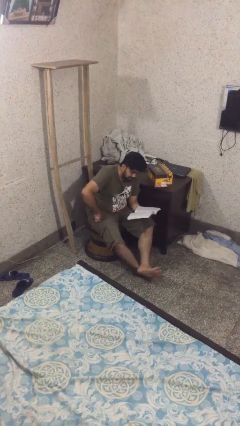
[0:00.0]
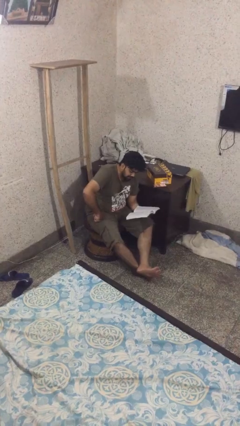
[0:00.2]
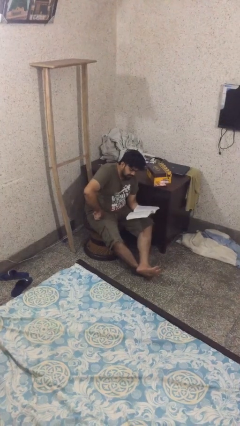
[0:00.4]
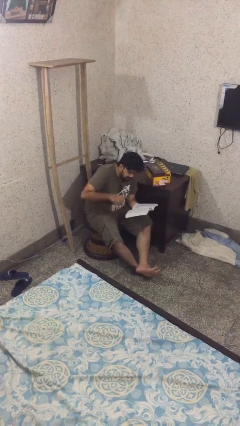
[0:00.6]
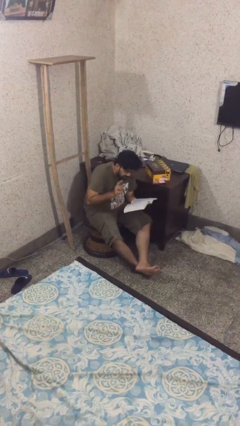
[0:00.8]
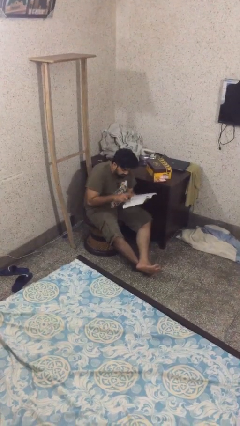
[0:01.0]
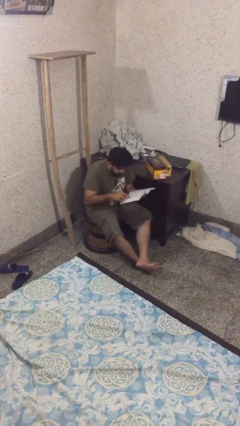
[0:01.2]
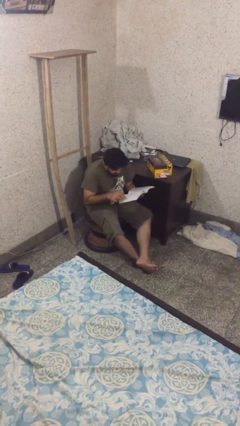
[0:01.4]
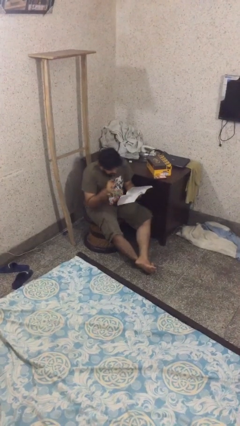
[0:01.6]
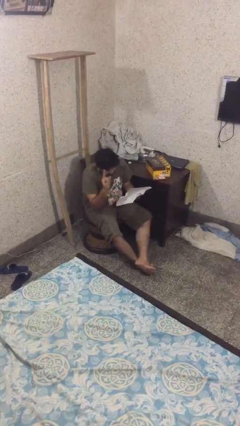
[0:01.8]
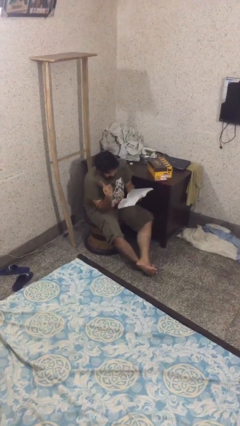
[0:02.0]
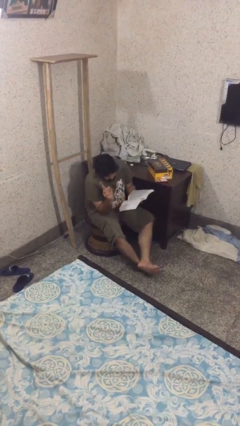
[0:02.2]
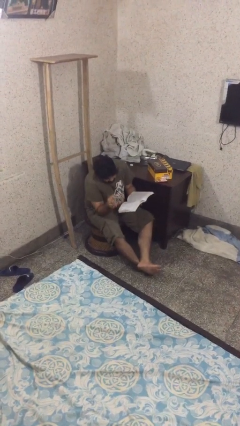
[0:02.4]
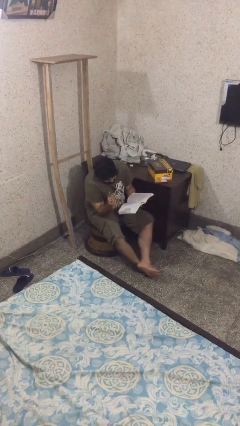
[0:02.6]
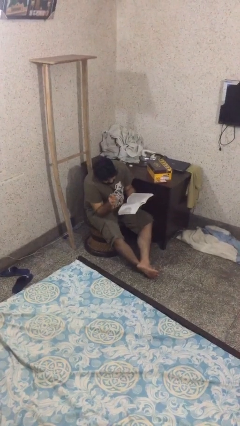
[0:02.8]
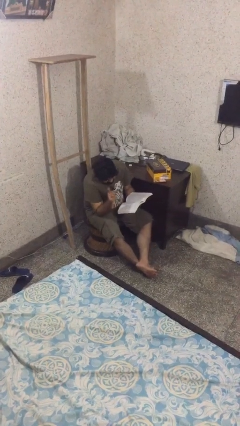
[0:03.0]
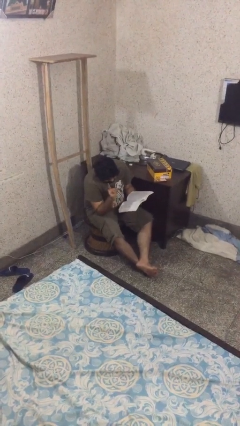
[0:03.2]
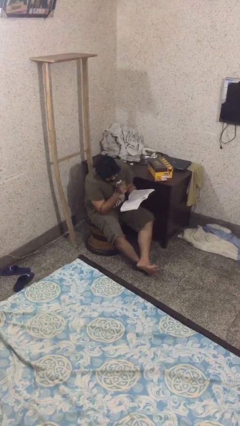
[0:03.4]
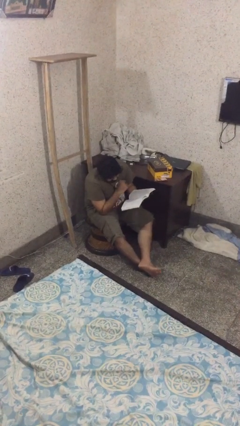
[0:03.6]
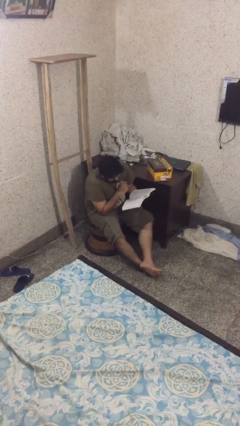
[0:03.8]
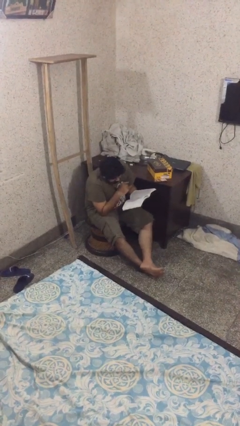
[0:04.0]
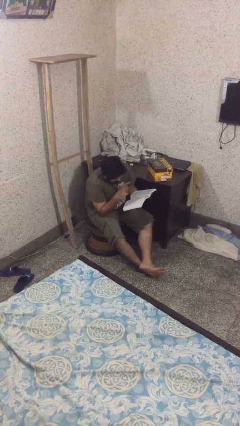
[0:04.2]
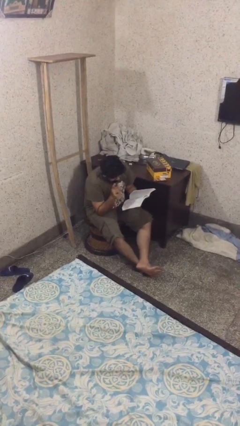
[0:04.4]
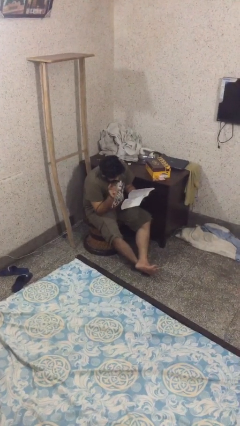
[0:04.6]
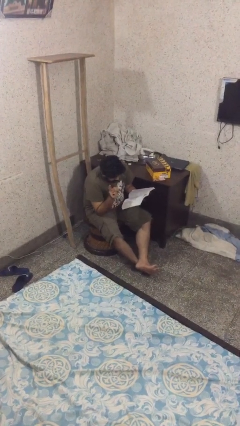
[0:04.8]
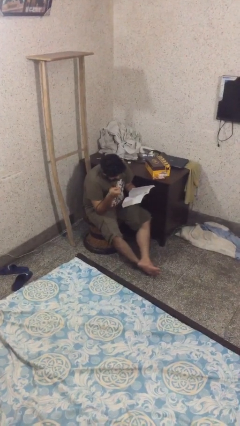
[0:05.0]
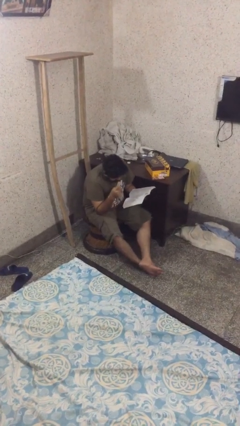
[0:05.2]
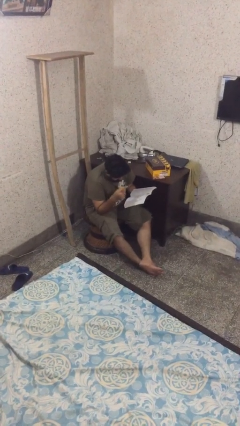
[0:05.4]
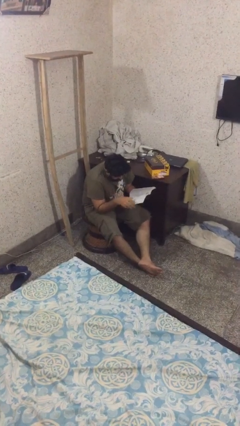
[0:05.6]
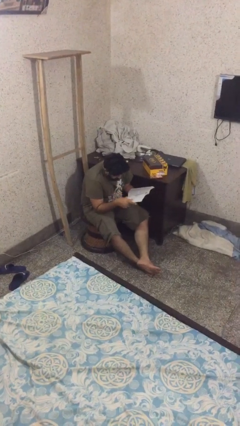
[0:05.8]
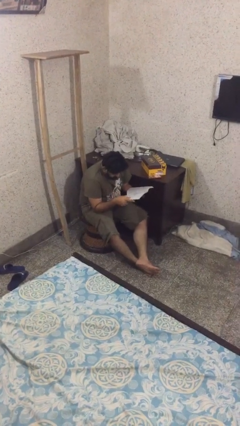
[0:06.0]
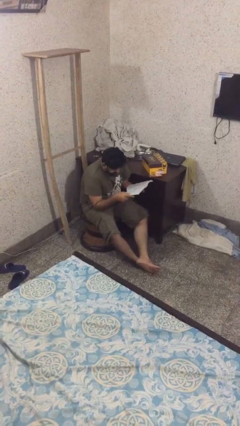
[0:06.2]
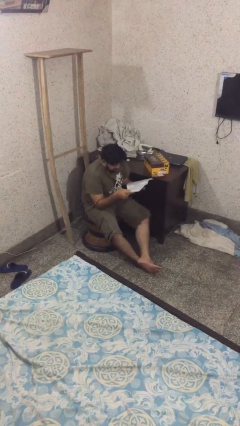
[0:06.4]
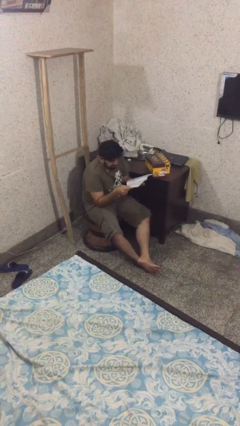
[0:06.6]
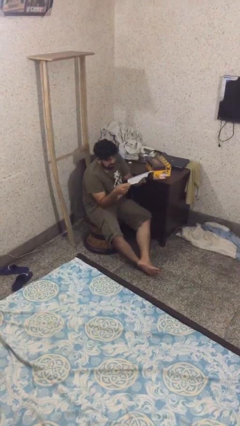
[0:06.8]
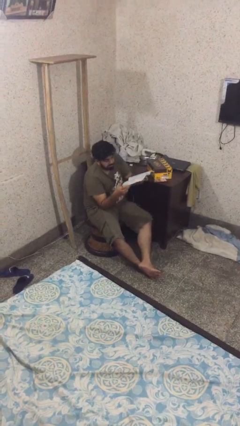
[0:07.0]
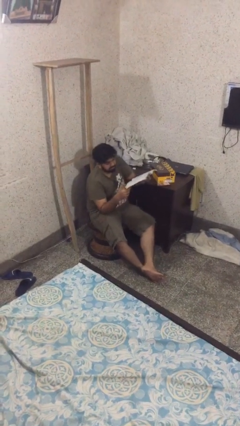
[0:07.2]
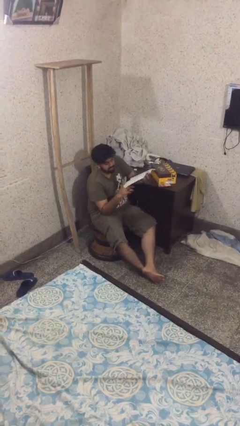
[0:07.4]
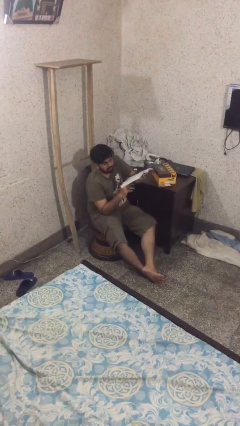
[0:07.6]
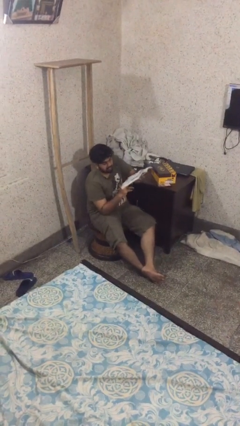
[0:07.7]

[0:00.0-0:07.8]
person reads document

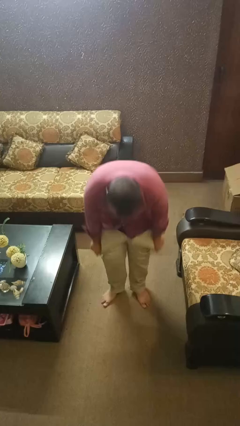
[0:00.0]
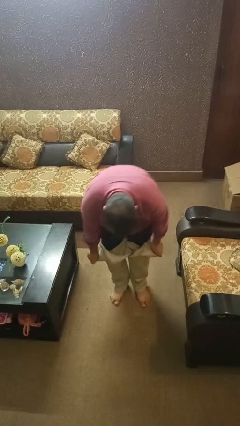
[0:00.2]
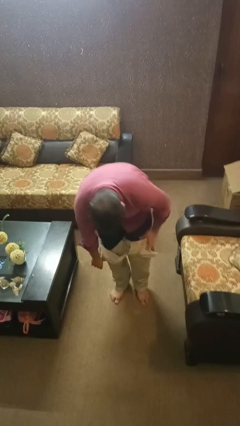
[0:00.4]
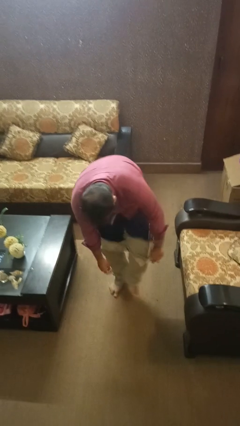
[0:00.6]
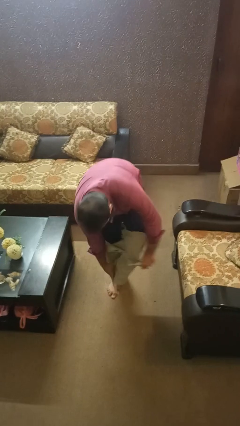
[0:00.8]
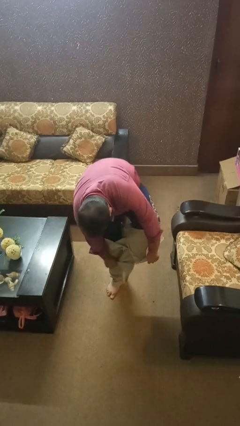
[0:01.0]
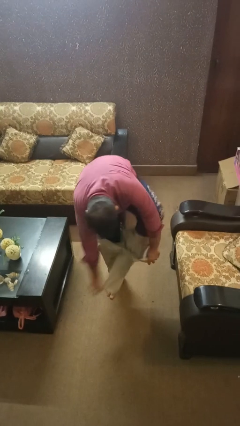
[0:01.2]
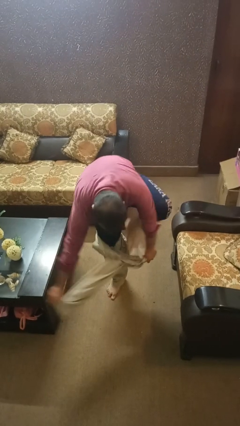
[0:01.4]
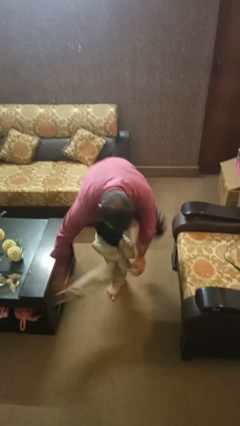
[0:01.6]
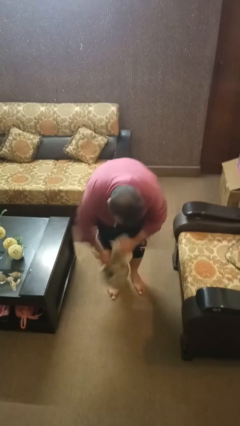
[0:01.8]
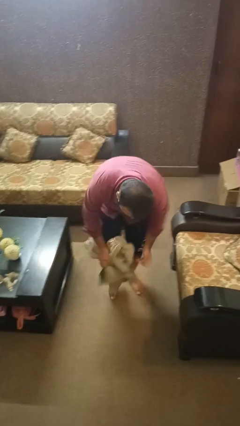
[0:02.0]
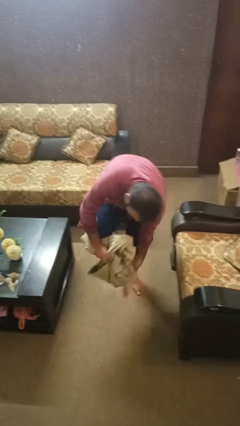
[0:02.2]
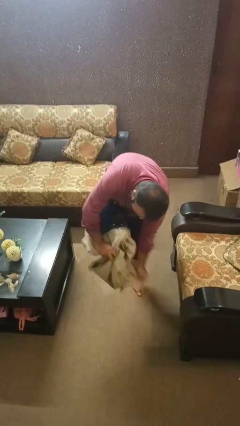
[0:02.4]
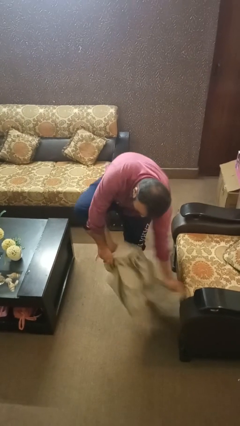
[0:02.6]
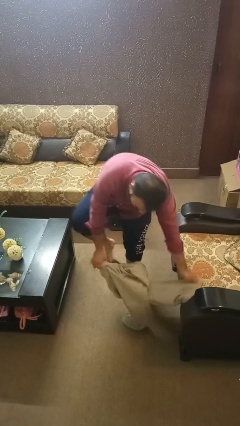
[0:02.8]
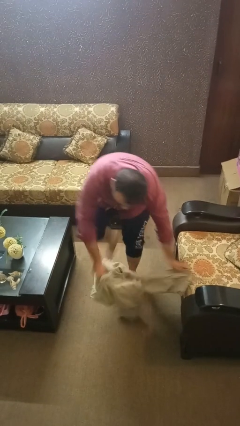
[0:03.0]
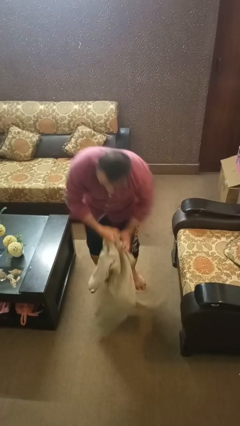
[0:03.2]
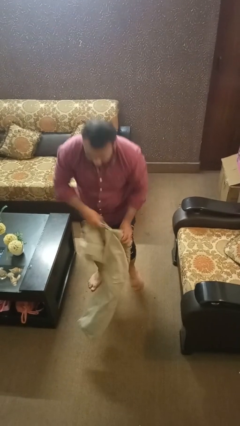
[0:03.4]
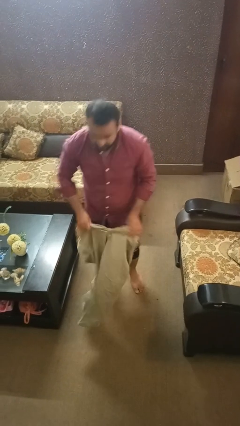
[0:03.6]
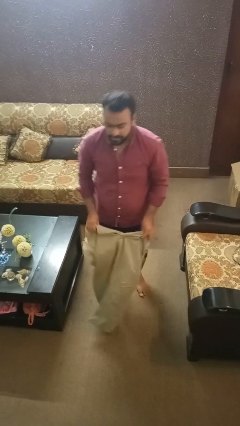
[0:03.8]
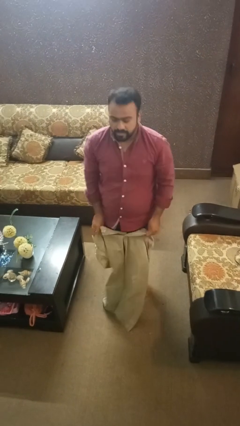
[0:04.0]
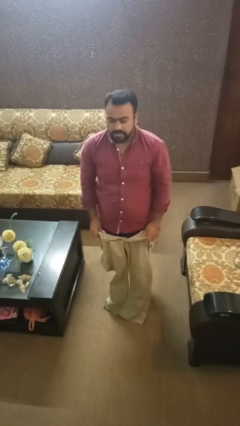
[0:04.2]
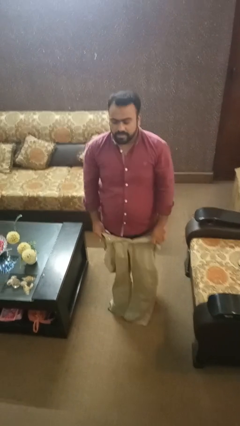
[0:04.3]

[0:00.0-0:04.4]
person takes off pants

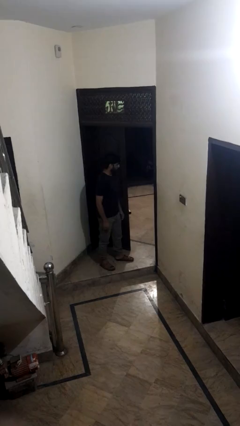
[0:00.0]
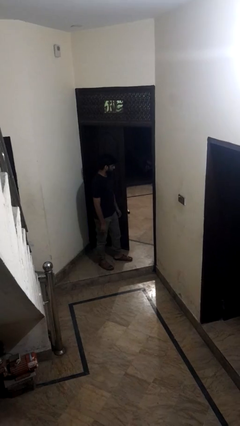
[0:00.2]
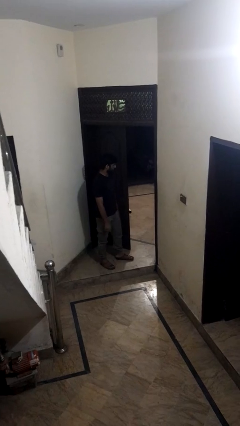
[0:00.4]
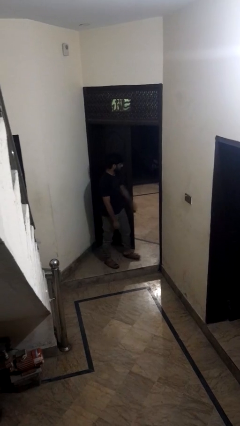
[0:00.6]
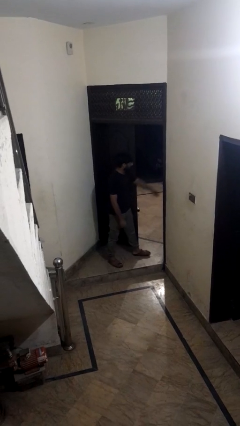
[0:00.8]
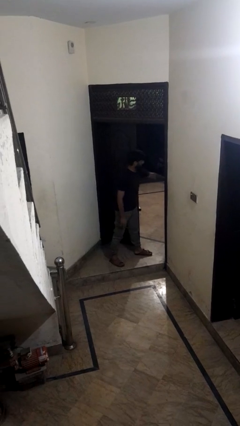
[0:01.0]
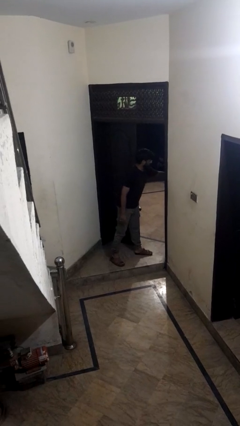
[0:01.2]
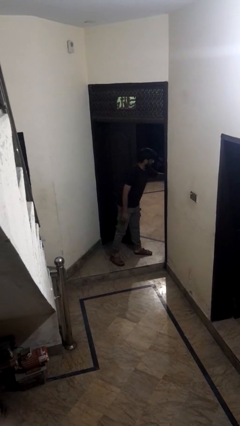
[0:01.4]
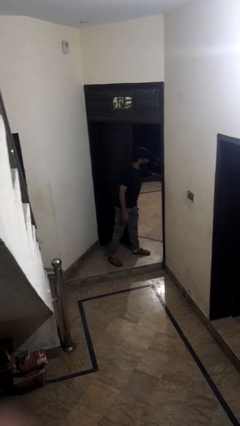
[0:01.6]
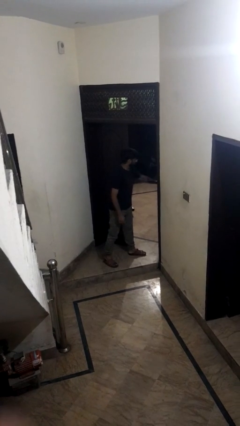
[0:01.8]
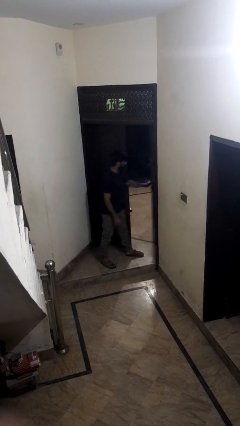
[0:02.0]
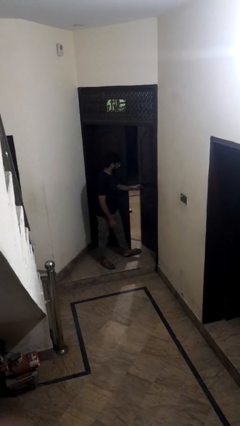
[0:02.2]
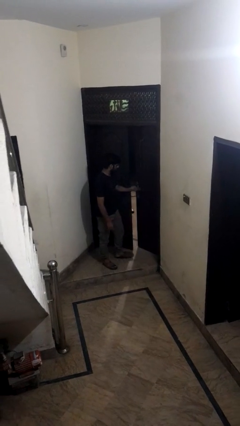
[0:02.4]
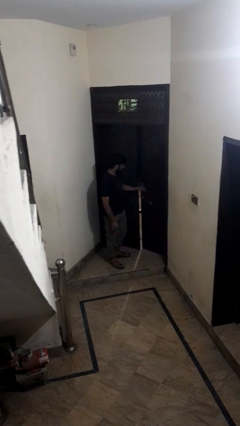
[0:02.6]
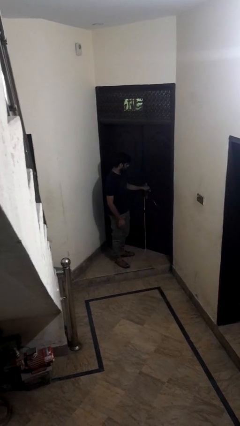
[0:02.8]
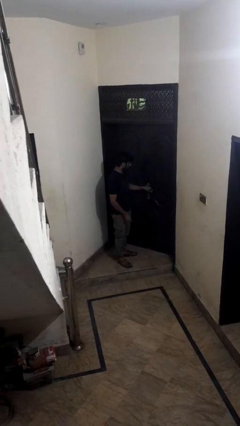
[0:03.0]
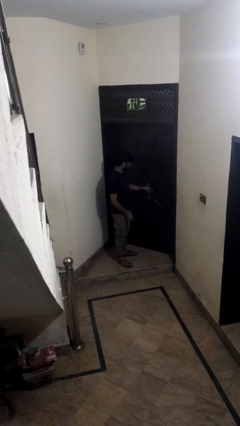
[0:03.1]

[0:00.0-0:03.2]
person closes facility door

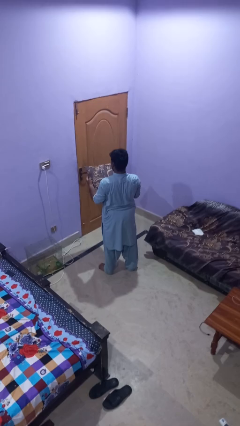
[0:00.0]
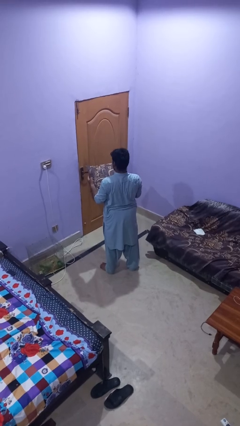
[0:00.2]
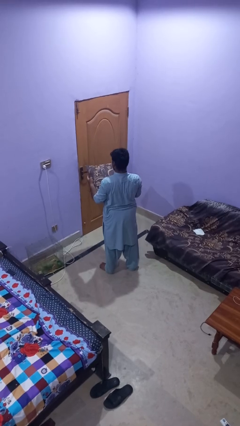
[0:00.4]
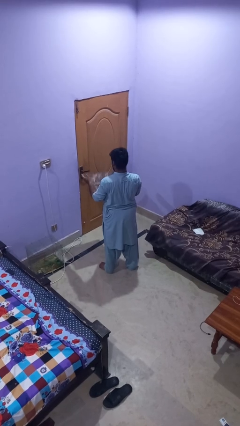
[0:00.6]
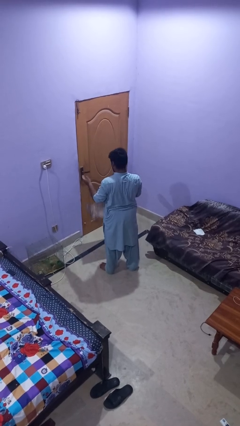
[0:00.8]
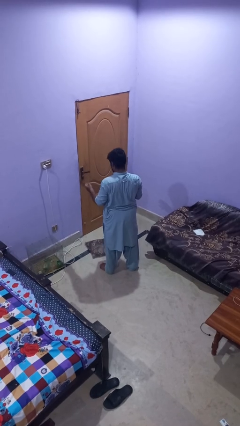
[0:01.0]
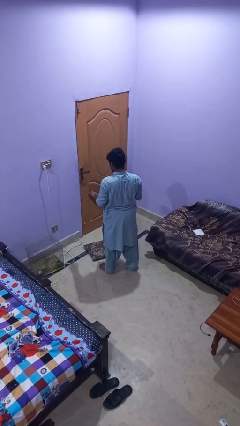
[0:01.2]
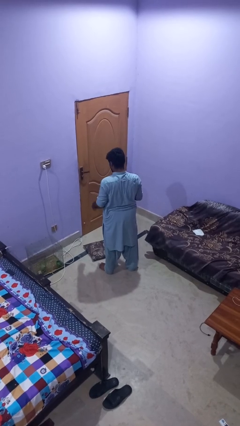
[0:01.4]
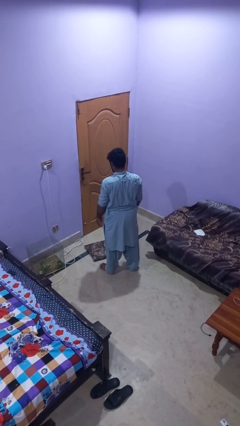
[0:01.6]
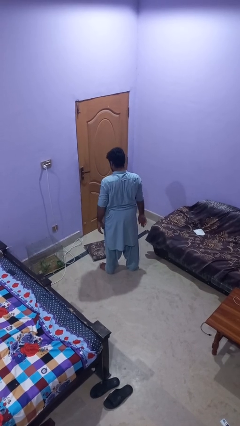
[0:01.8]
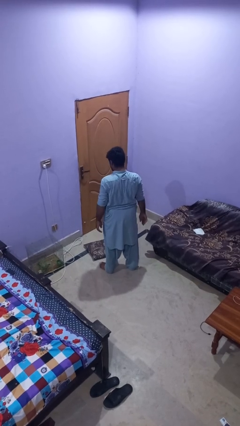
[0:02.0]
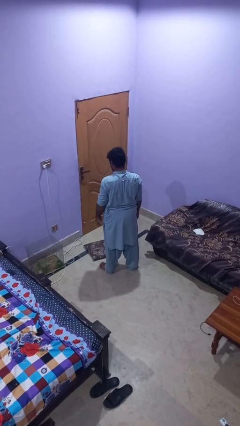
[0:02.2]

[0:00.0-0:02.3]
person drops object
